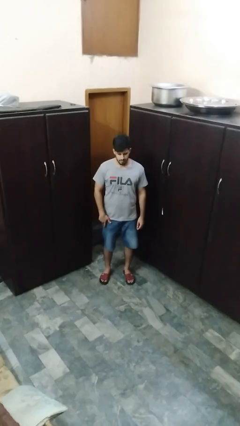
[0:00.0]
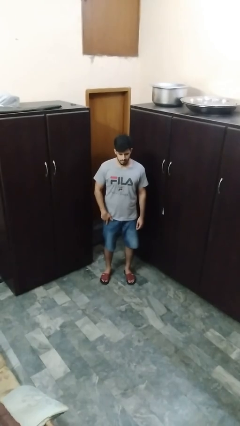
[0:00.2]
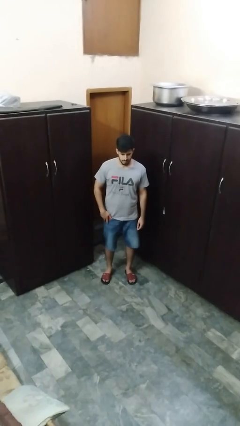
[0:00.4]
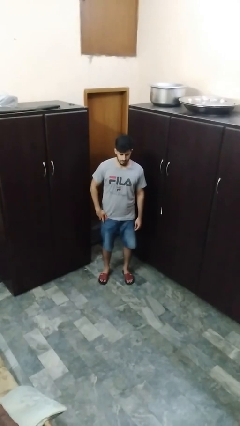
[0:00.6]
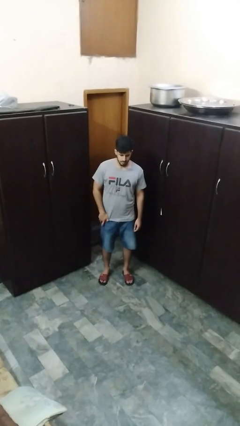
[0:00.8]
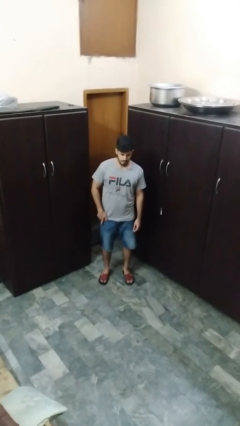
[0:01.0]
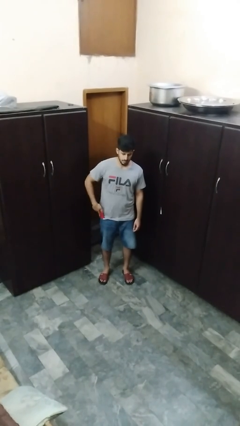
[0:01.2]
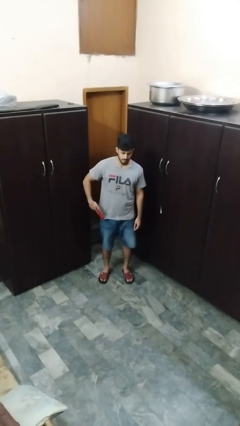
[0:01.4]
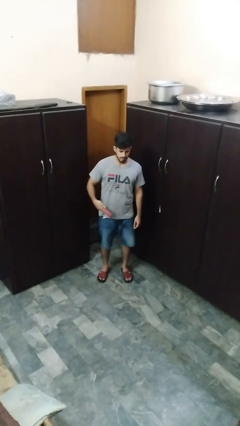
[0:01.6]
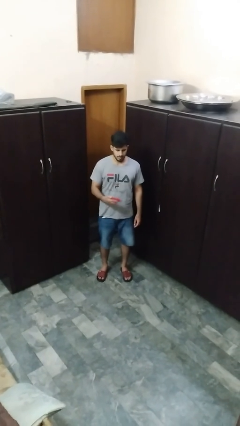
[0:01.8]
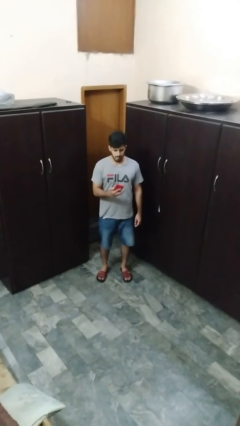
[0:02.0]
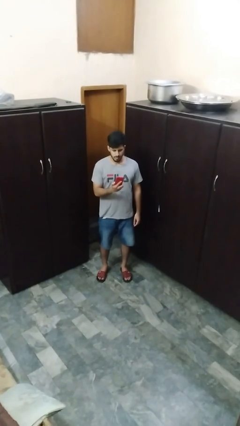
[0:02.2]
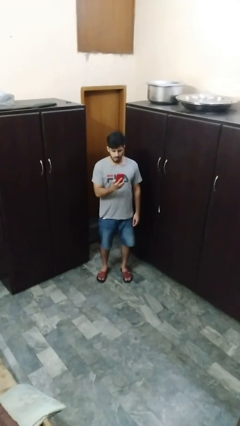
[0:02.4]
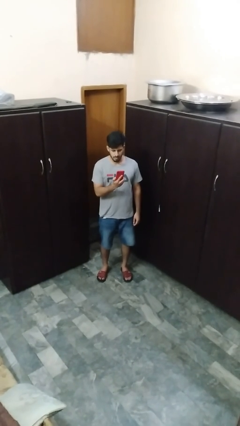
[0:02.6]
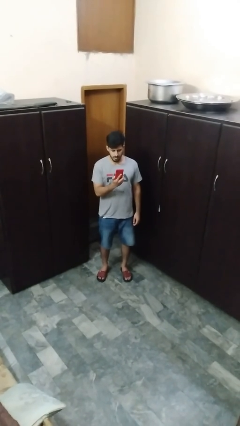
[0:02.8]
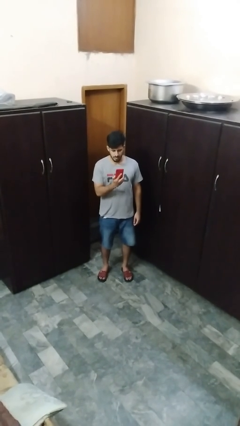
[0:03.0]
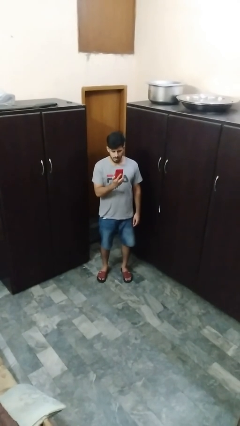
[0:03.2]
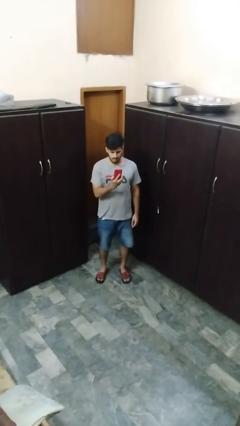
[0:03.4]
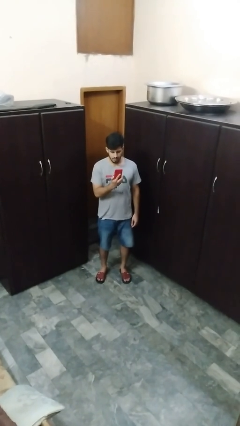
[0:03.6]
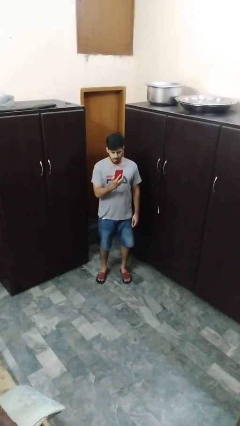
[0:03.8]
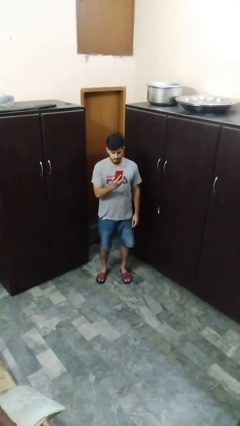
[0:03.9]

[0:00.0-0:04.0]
person takes phone from pocket

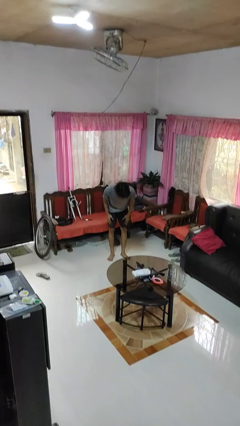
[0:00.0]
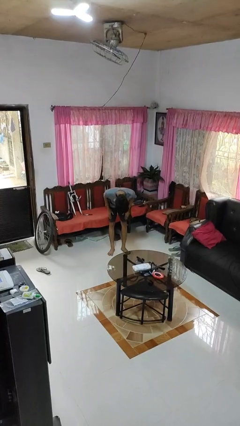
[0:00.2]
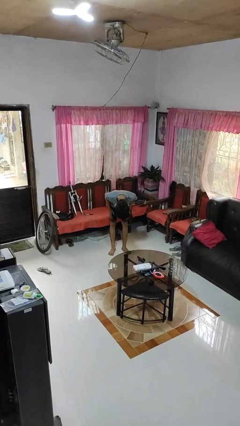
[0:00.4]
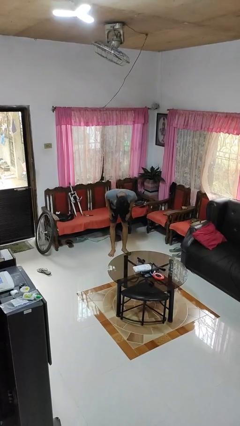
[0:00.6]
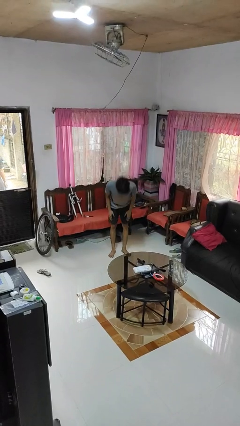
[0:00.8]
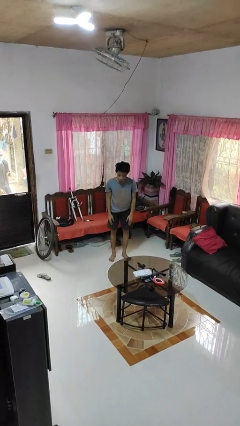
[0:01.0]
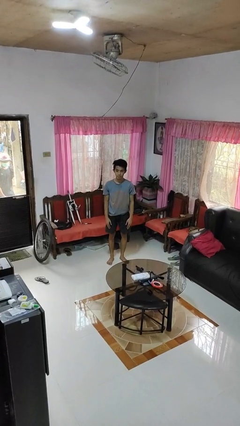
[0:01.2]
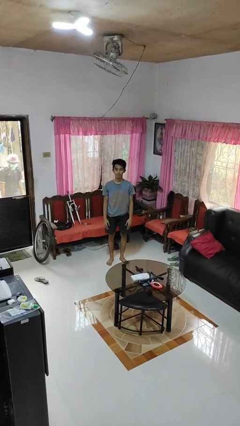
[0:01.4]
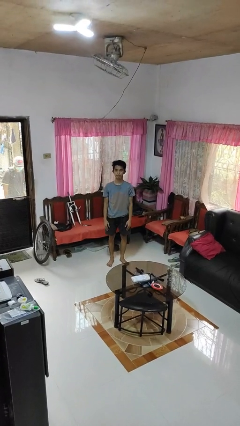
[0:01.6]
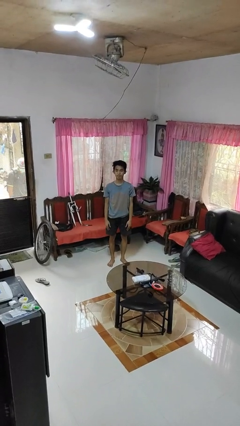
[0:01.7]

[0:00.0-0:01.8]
person bows

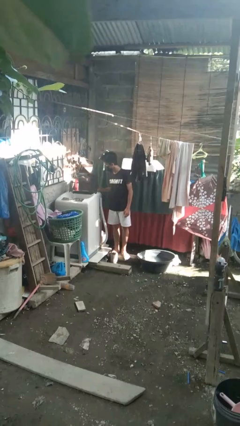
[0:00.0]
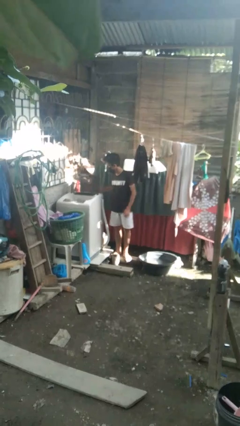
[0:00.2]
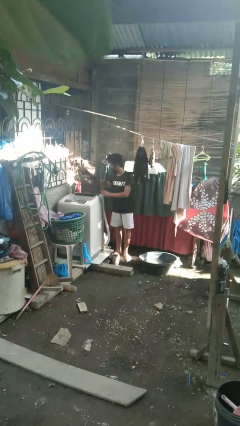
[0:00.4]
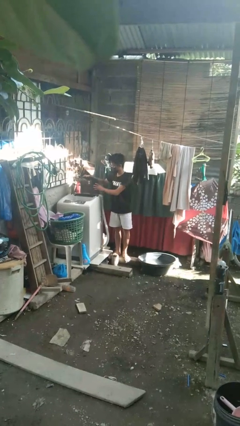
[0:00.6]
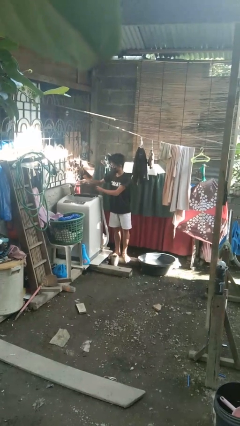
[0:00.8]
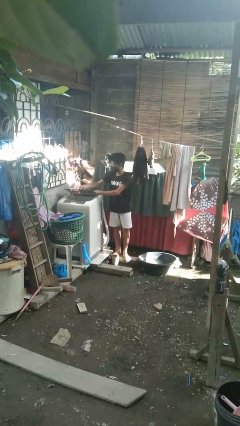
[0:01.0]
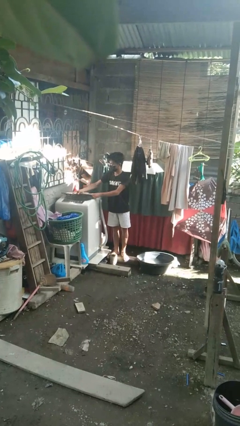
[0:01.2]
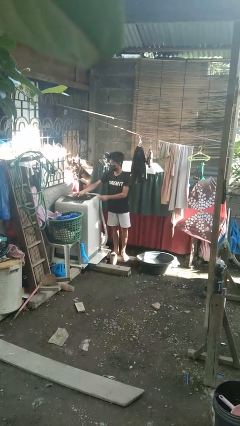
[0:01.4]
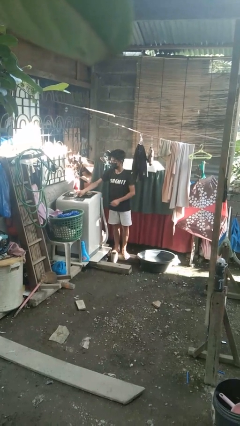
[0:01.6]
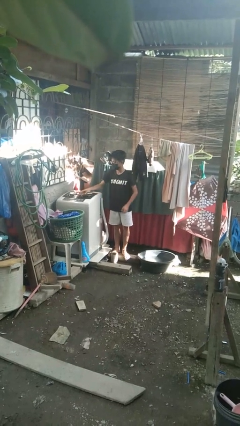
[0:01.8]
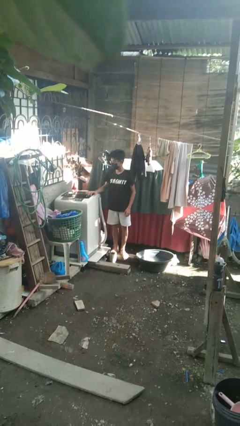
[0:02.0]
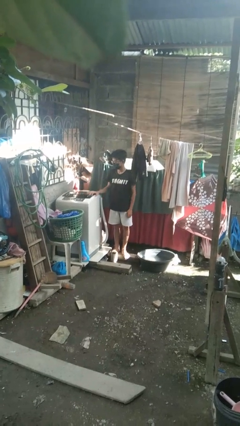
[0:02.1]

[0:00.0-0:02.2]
person closes clothes washer

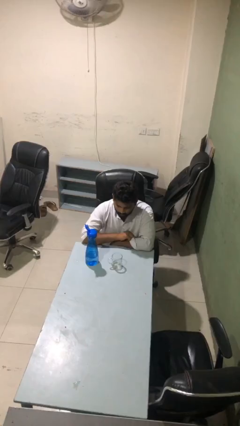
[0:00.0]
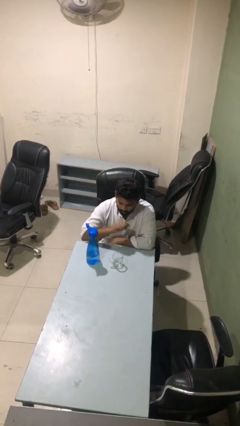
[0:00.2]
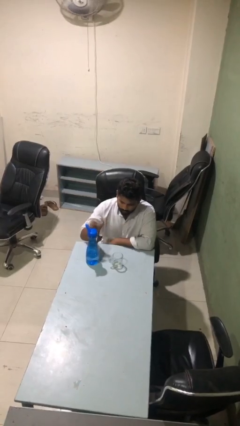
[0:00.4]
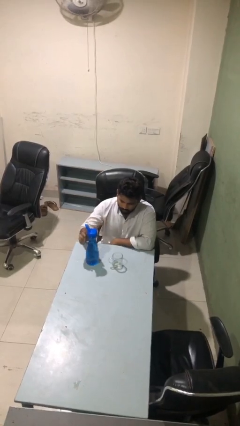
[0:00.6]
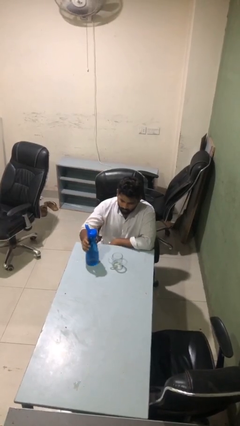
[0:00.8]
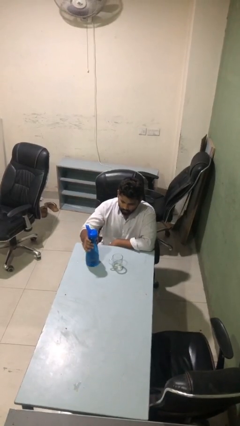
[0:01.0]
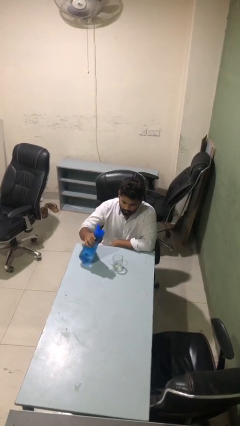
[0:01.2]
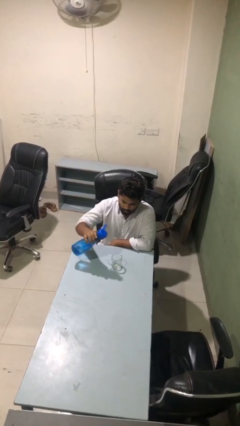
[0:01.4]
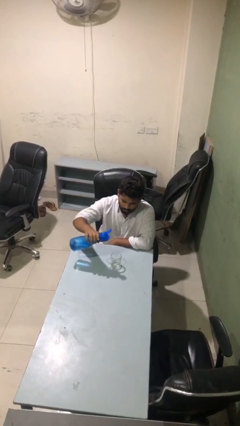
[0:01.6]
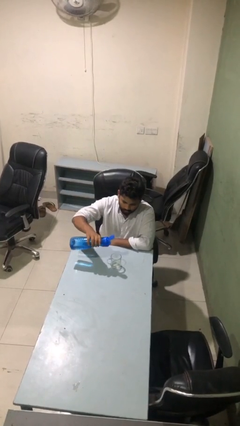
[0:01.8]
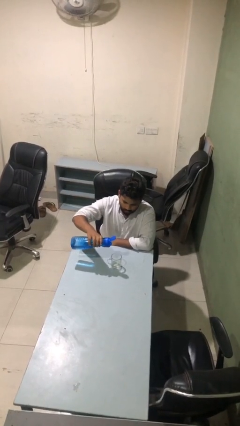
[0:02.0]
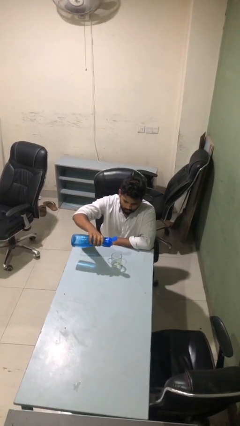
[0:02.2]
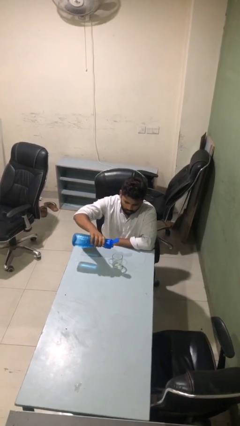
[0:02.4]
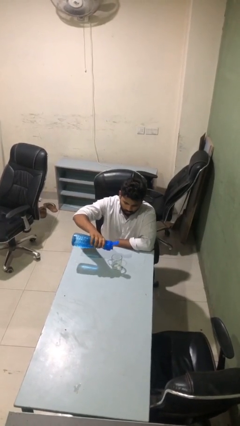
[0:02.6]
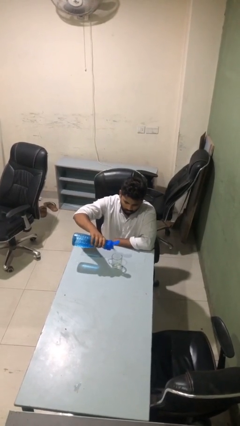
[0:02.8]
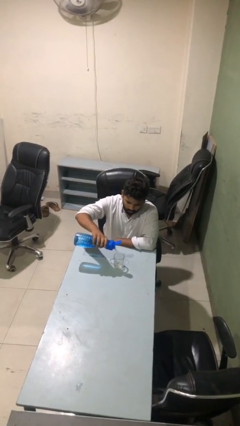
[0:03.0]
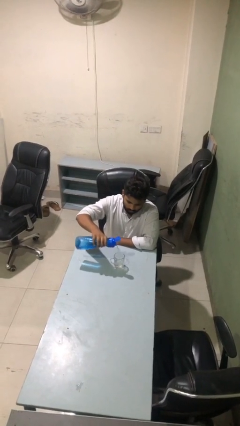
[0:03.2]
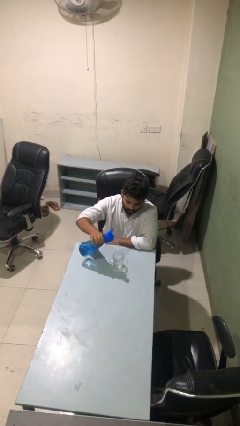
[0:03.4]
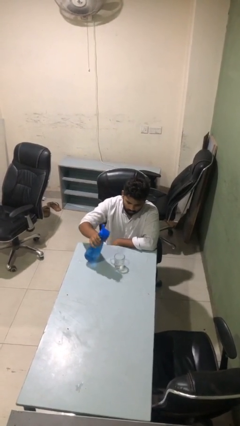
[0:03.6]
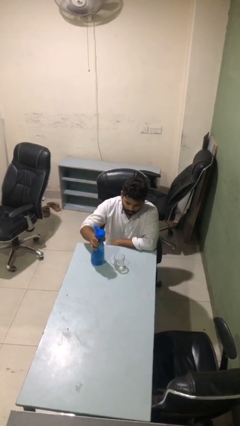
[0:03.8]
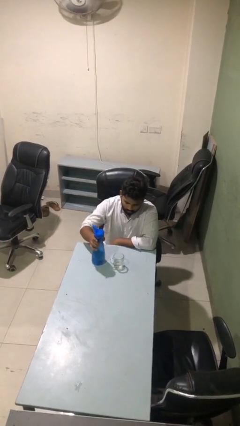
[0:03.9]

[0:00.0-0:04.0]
person pours liquid into cup

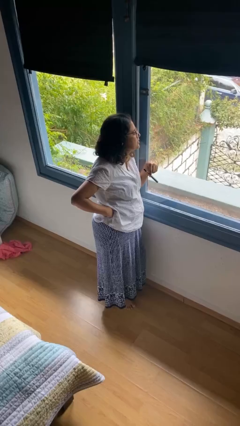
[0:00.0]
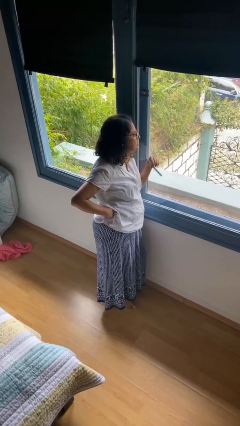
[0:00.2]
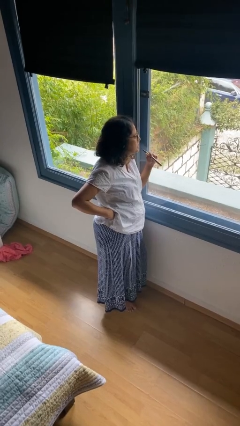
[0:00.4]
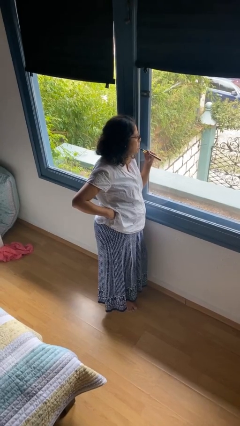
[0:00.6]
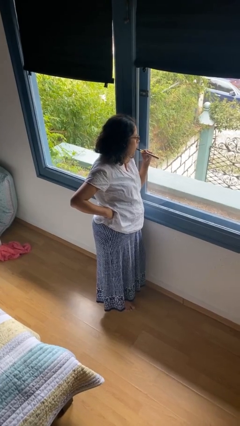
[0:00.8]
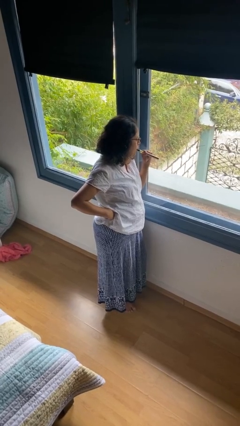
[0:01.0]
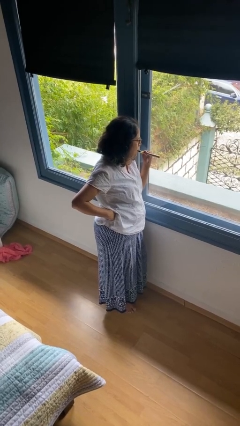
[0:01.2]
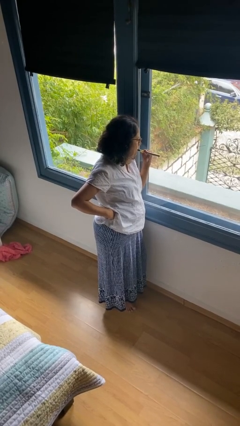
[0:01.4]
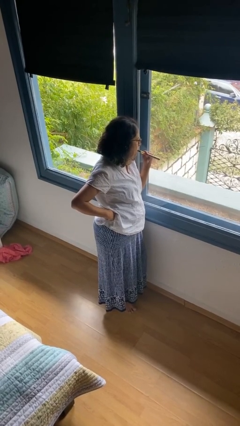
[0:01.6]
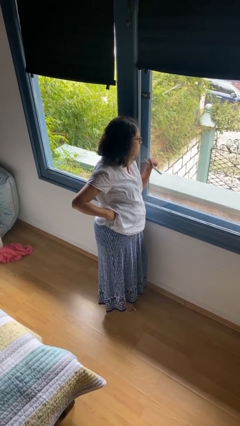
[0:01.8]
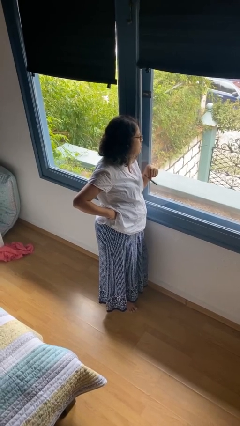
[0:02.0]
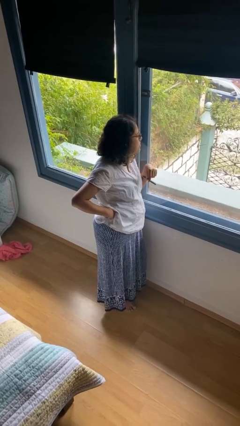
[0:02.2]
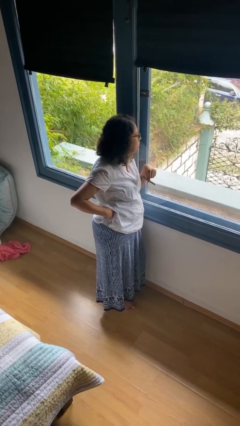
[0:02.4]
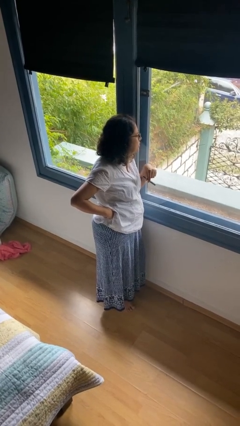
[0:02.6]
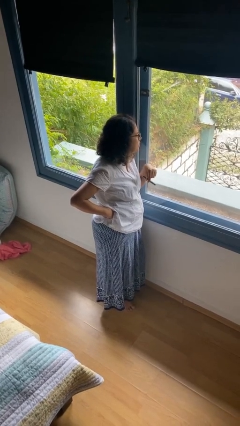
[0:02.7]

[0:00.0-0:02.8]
person vapes

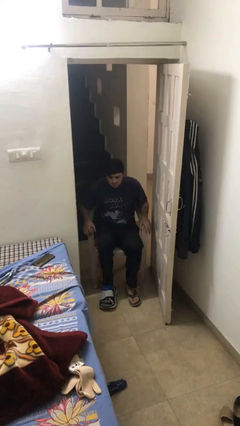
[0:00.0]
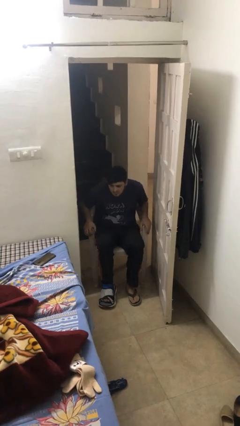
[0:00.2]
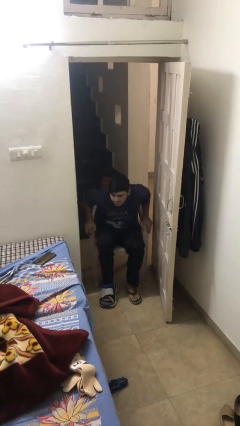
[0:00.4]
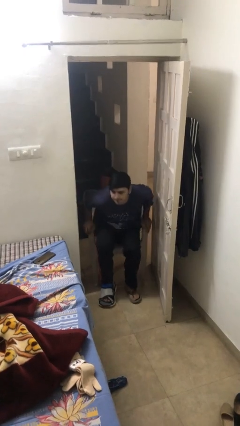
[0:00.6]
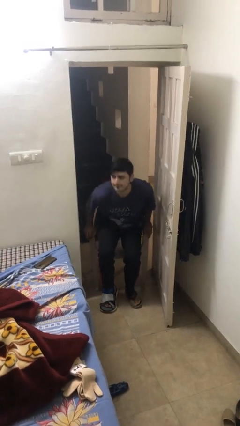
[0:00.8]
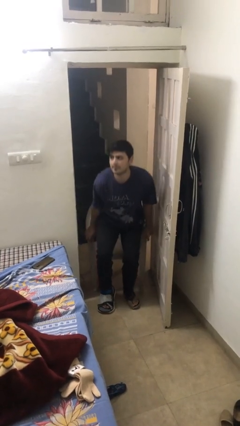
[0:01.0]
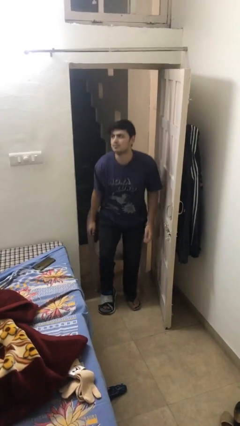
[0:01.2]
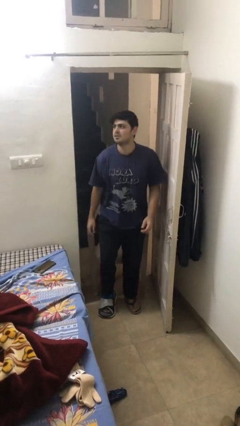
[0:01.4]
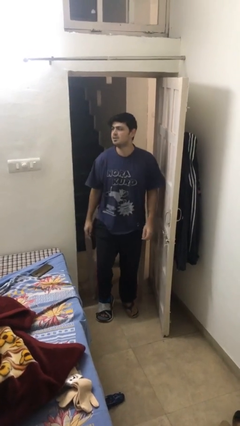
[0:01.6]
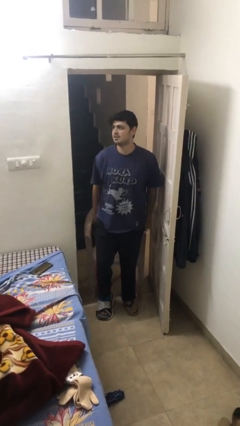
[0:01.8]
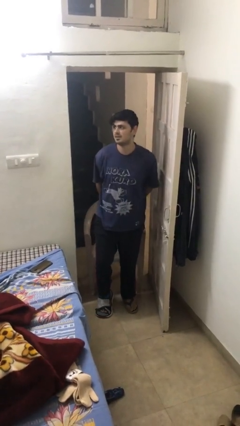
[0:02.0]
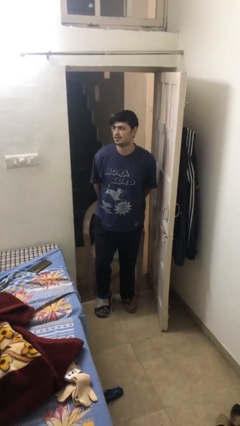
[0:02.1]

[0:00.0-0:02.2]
person stands up
